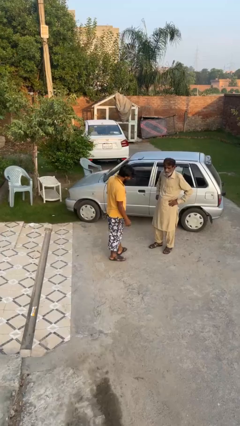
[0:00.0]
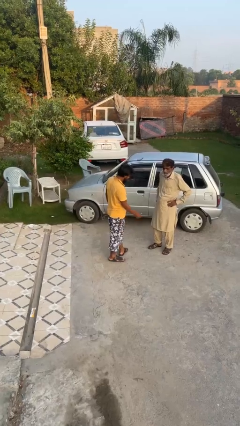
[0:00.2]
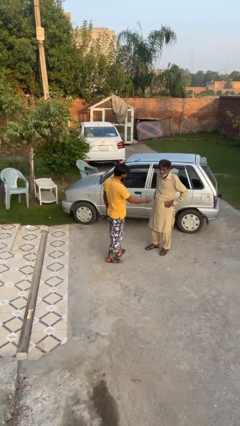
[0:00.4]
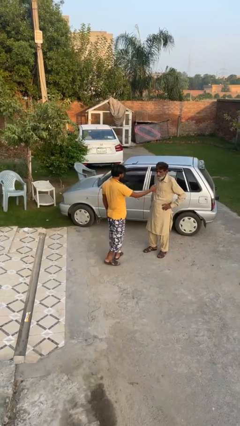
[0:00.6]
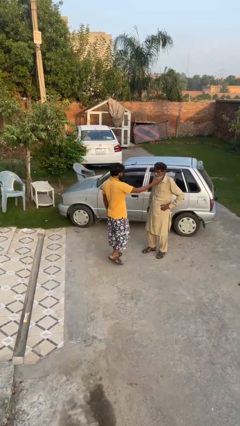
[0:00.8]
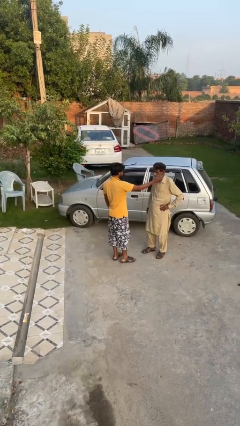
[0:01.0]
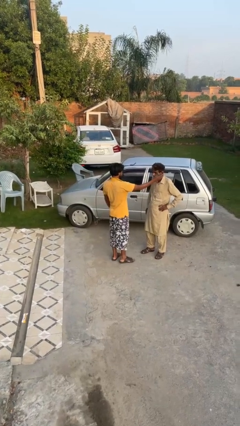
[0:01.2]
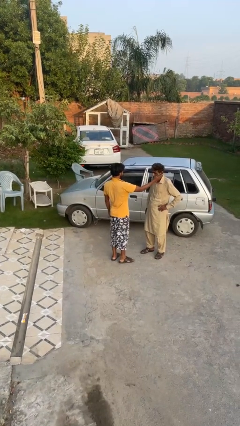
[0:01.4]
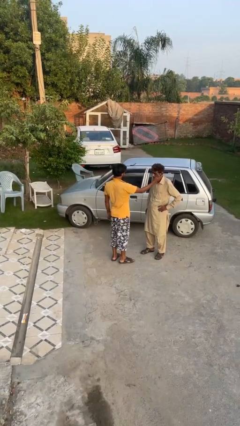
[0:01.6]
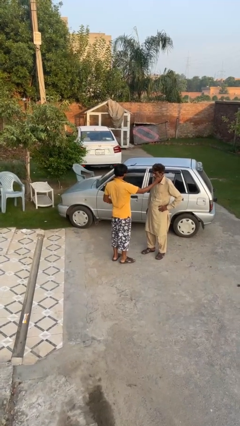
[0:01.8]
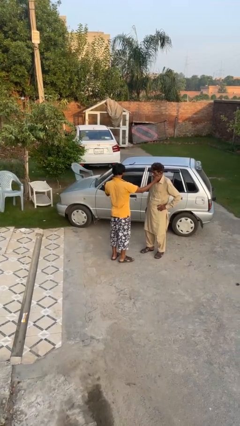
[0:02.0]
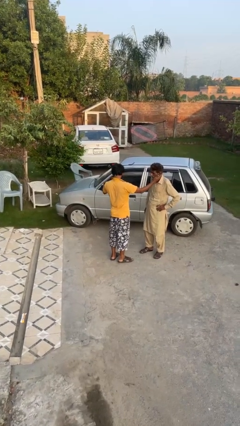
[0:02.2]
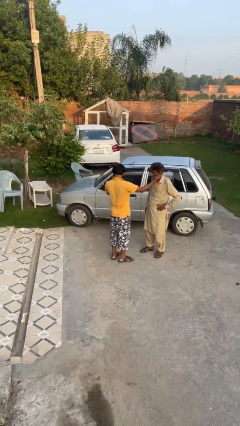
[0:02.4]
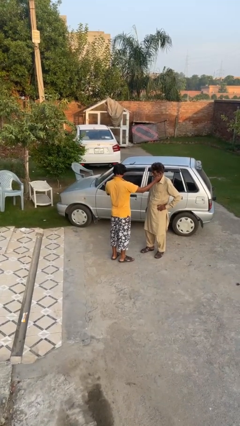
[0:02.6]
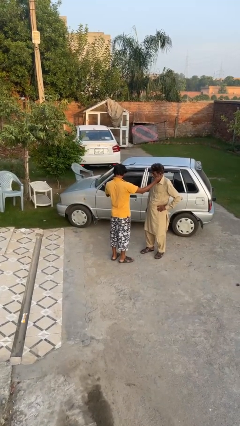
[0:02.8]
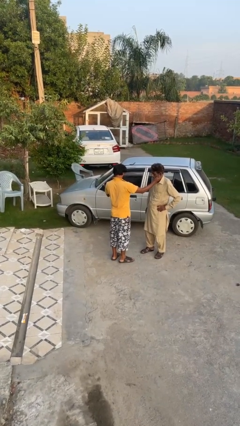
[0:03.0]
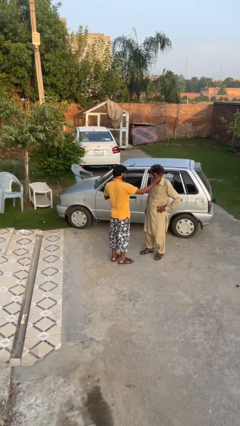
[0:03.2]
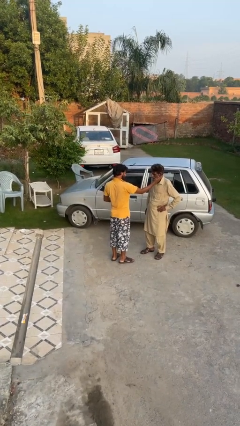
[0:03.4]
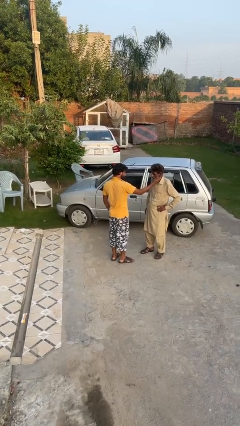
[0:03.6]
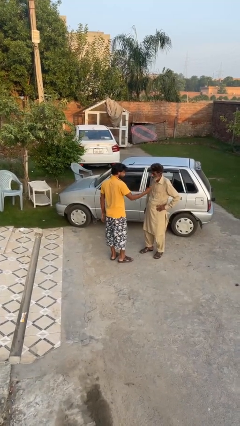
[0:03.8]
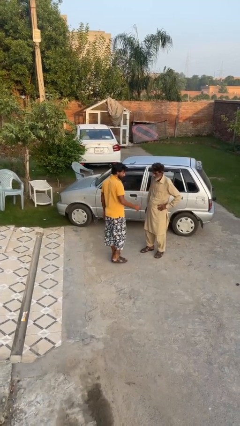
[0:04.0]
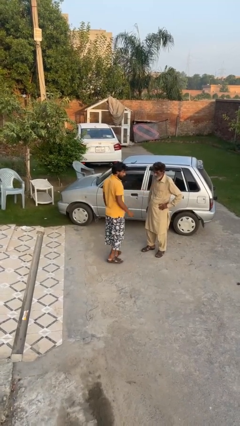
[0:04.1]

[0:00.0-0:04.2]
person touches face of person

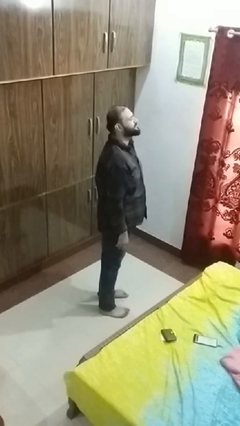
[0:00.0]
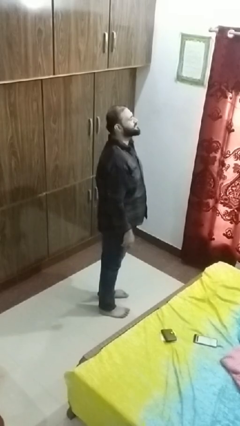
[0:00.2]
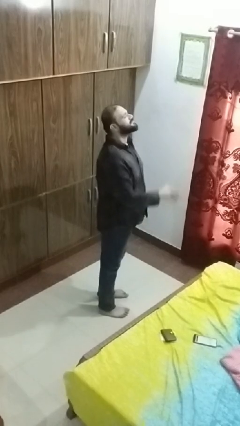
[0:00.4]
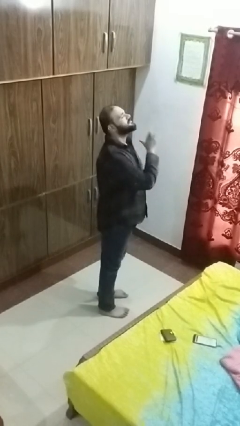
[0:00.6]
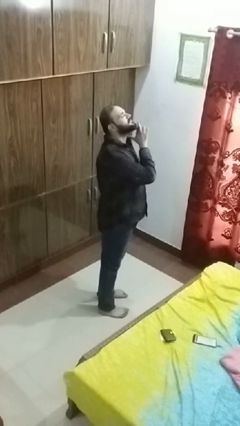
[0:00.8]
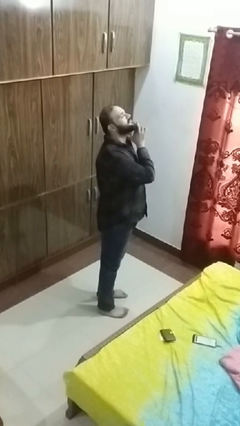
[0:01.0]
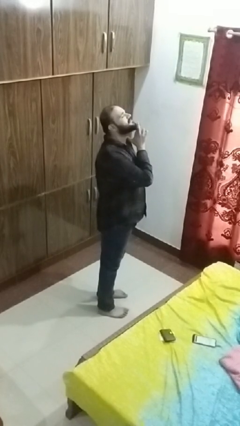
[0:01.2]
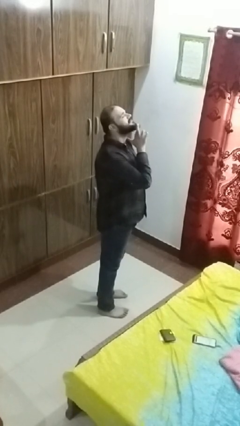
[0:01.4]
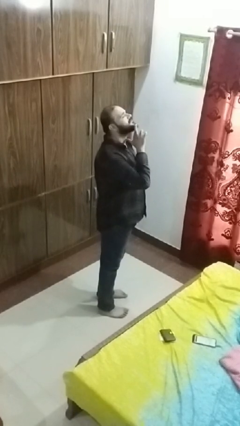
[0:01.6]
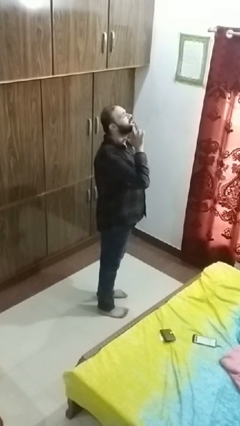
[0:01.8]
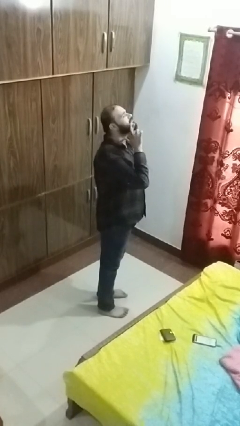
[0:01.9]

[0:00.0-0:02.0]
person gestures cut

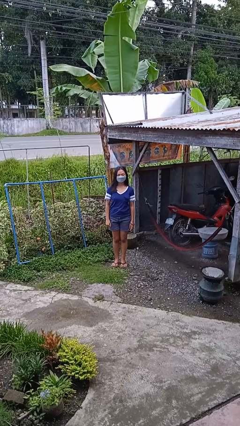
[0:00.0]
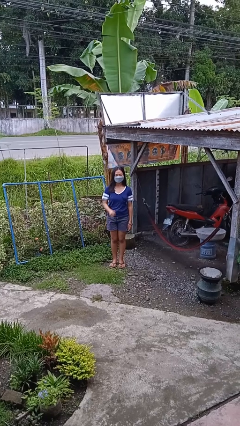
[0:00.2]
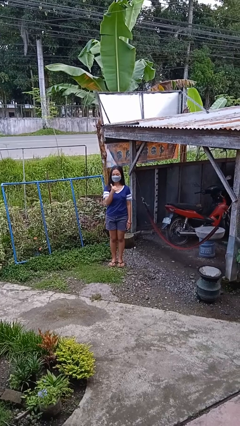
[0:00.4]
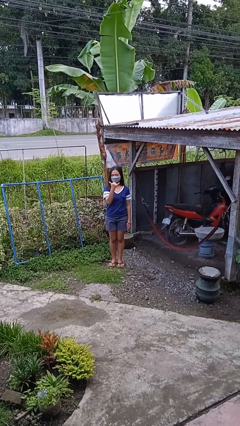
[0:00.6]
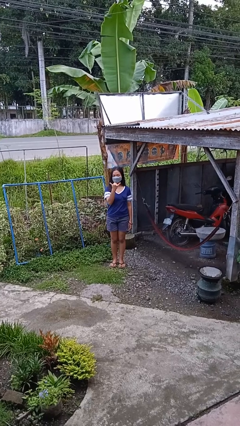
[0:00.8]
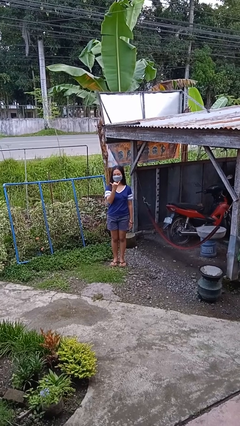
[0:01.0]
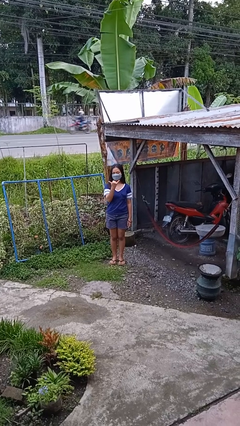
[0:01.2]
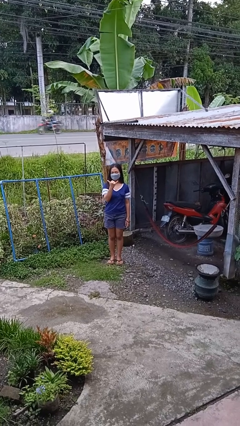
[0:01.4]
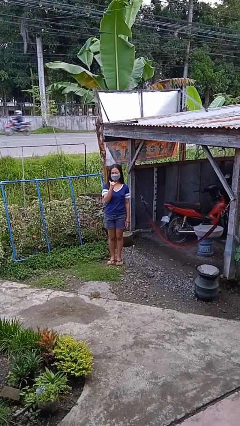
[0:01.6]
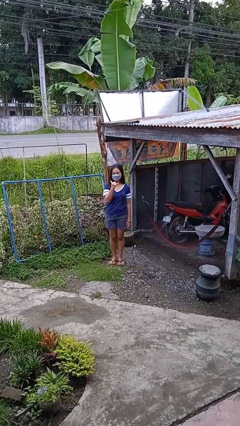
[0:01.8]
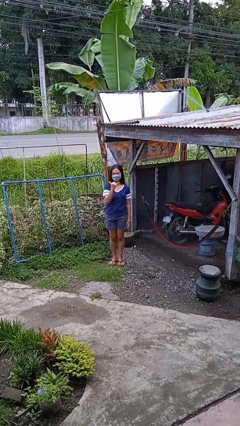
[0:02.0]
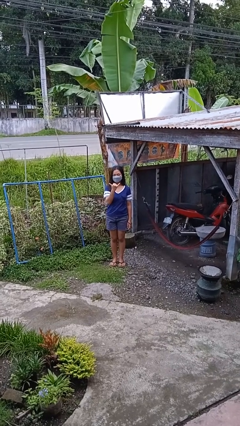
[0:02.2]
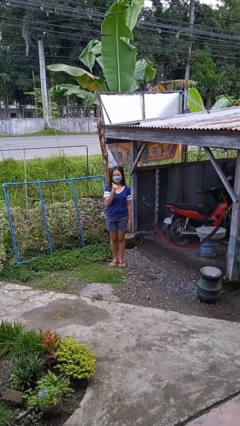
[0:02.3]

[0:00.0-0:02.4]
person gestures hang loose

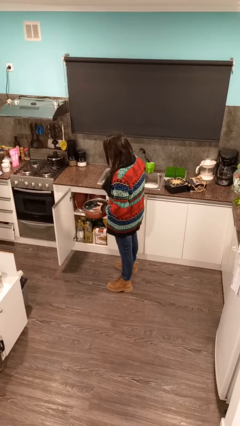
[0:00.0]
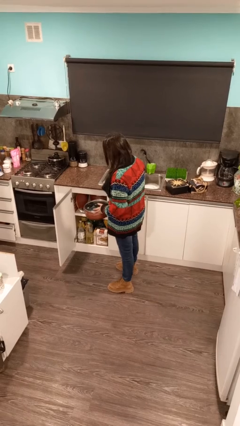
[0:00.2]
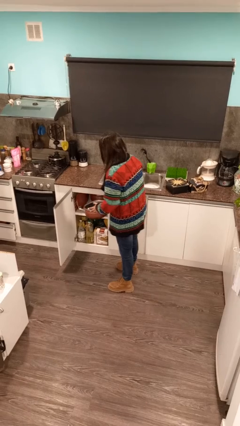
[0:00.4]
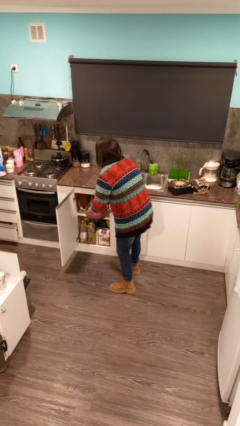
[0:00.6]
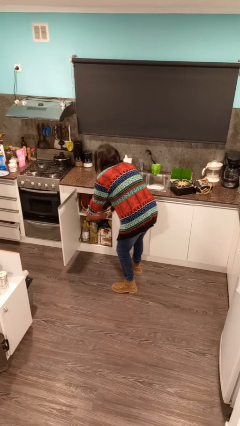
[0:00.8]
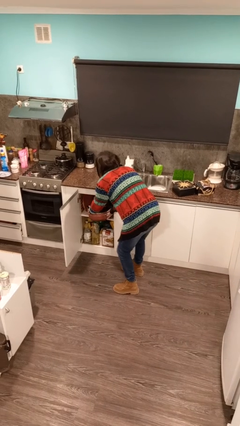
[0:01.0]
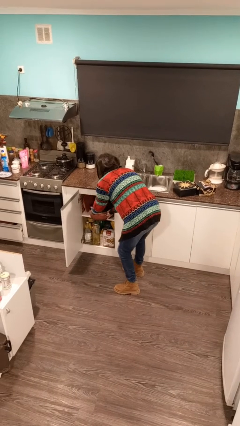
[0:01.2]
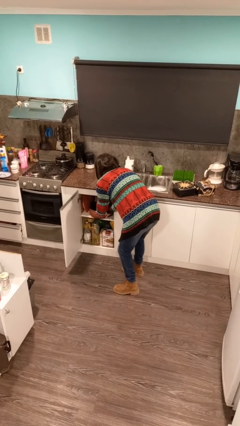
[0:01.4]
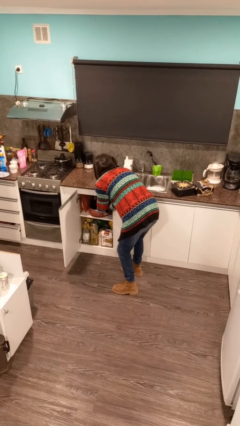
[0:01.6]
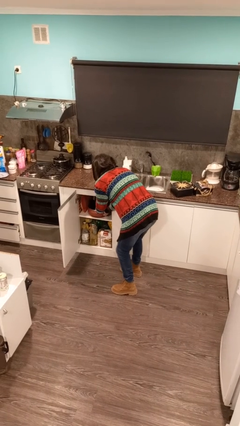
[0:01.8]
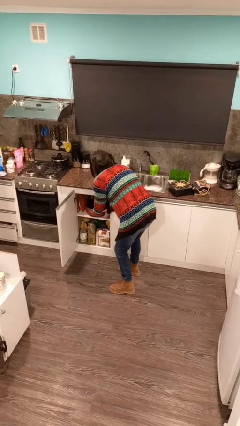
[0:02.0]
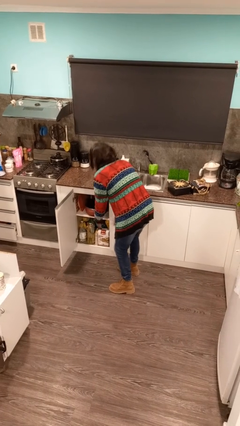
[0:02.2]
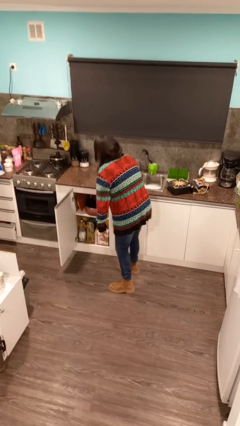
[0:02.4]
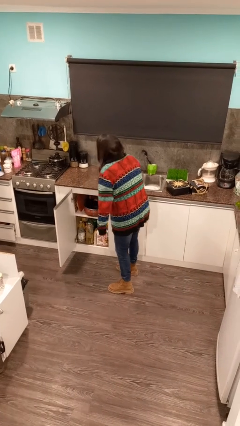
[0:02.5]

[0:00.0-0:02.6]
person puts down object into cabinet

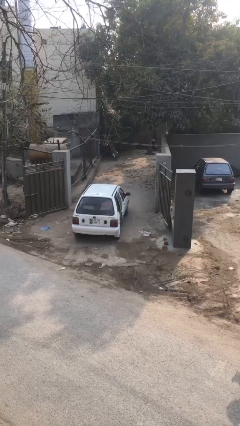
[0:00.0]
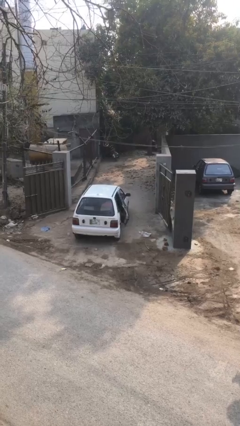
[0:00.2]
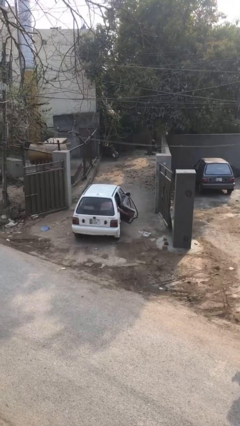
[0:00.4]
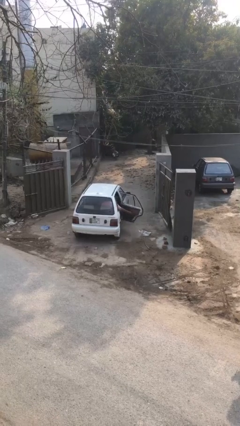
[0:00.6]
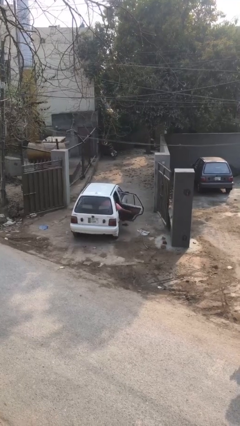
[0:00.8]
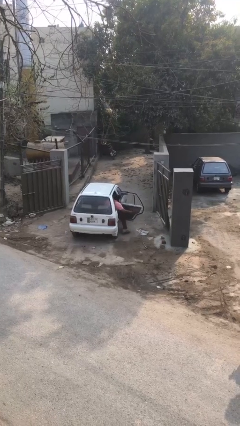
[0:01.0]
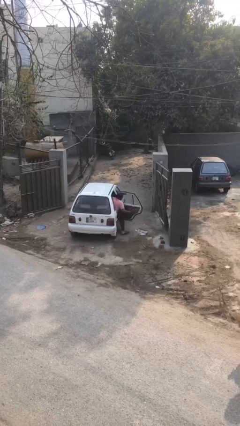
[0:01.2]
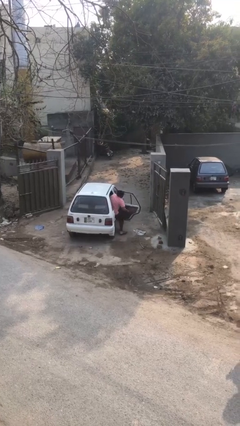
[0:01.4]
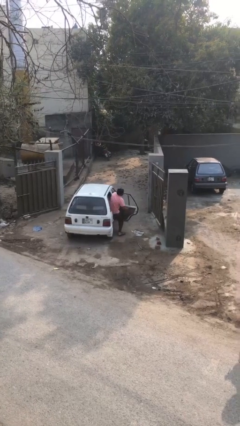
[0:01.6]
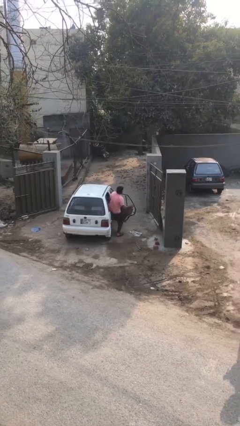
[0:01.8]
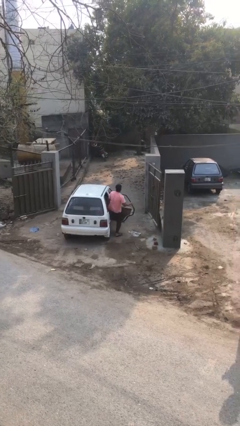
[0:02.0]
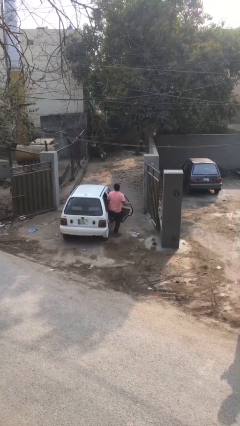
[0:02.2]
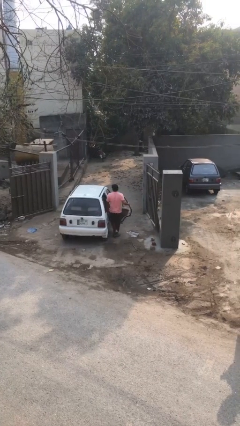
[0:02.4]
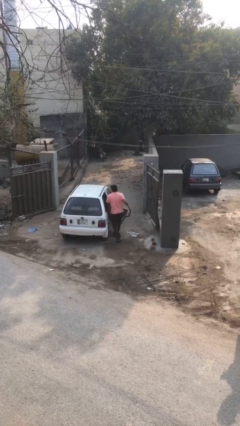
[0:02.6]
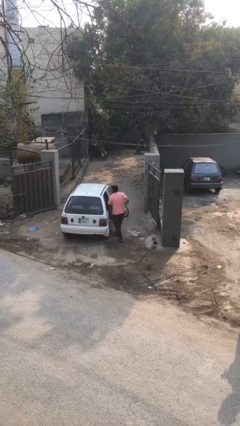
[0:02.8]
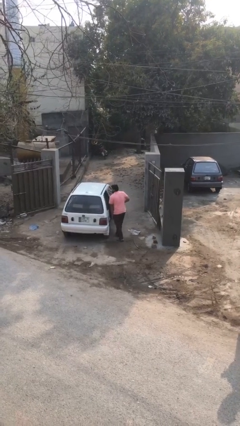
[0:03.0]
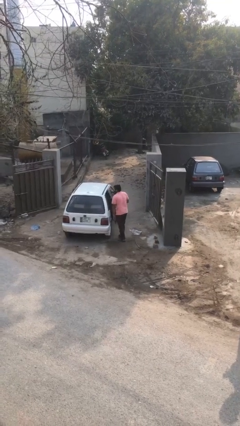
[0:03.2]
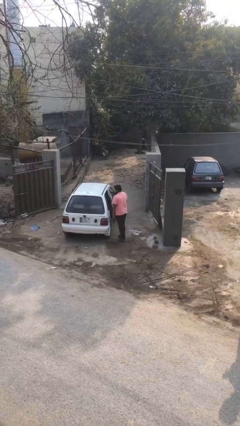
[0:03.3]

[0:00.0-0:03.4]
car drops off person

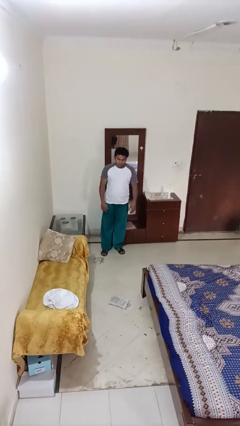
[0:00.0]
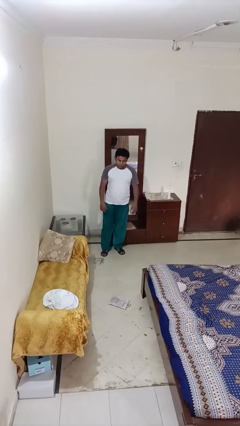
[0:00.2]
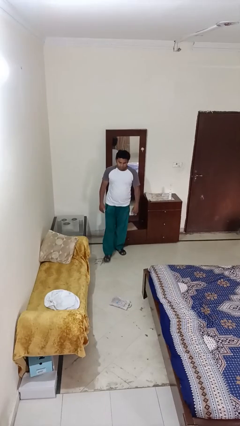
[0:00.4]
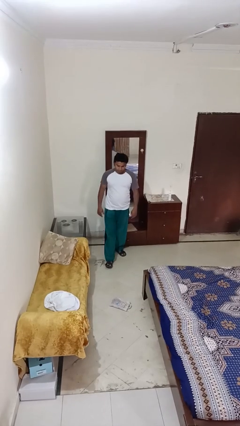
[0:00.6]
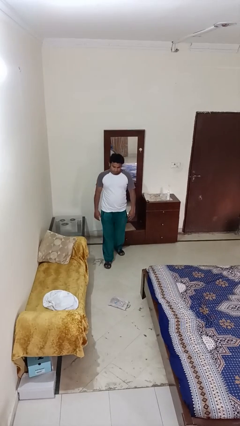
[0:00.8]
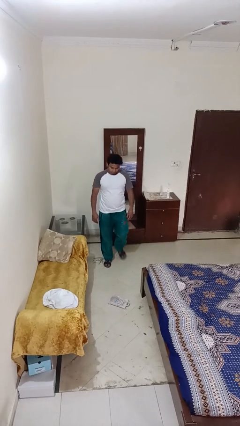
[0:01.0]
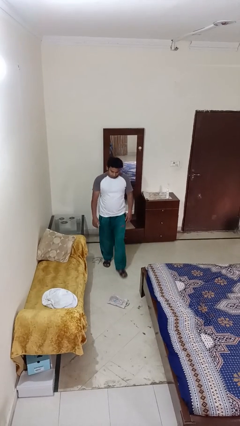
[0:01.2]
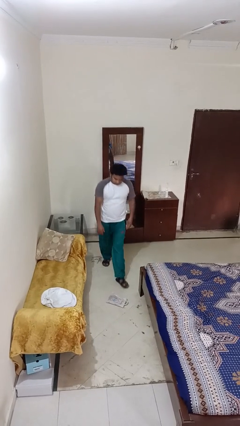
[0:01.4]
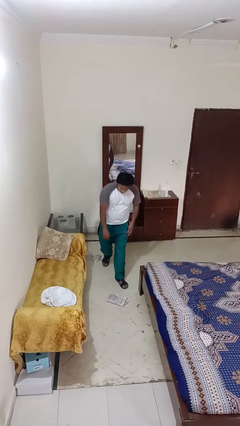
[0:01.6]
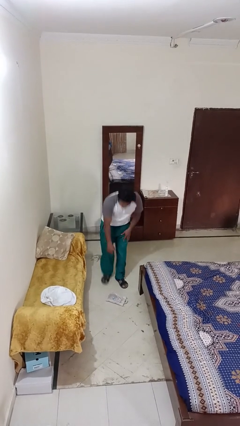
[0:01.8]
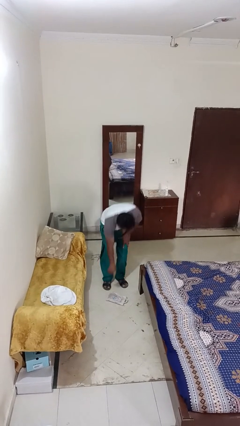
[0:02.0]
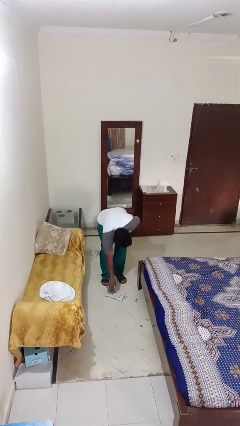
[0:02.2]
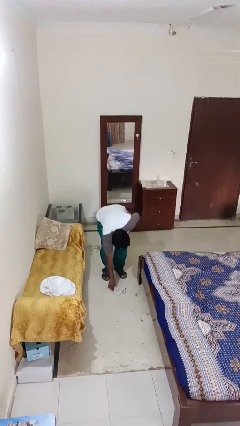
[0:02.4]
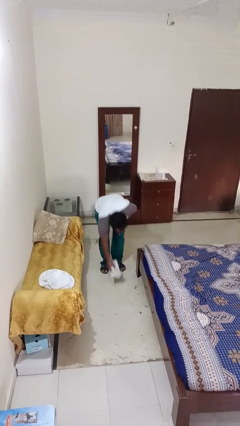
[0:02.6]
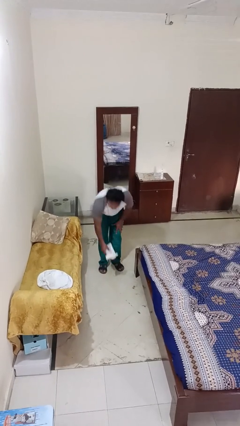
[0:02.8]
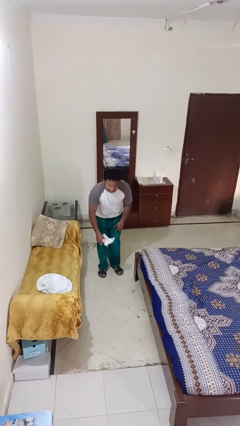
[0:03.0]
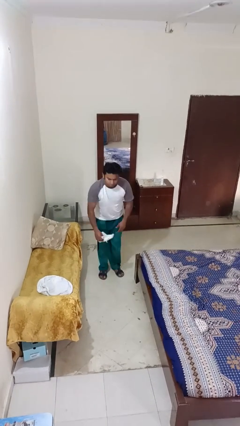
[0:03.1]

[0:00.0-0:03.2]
person picks up object from floor
